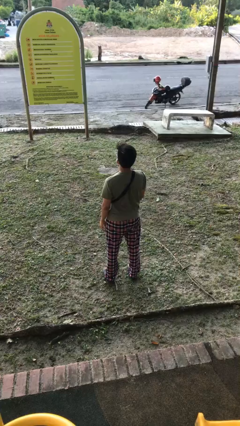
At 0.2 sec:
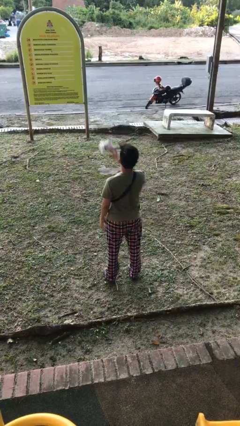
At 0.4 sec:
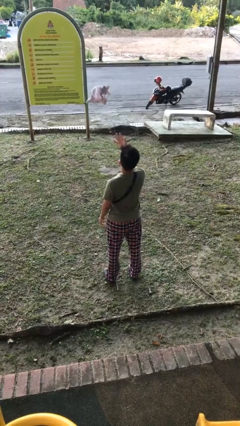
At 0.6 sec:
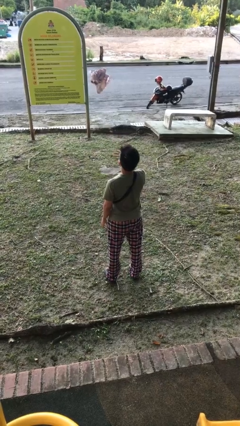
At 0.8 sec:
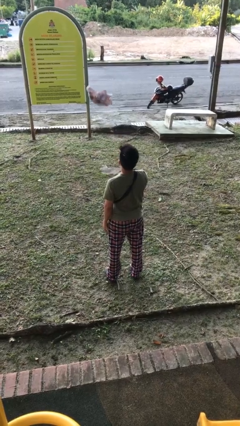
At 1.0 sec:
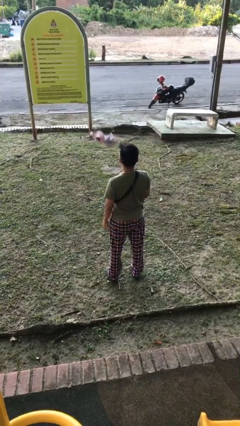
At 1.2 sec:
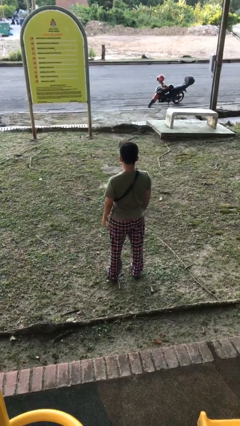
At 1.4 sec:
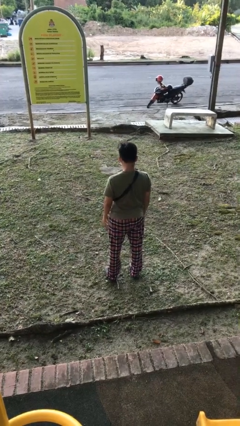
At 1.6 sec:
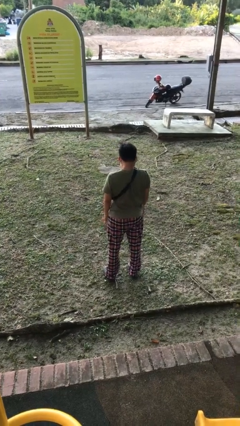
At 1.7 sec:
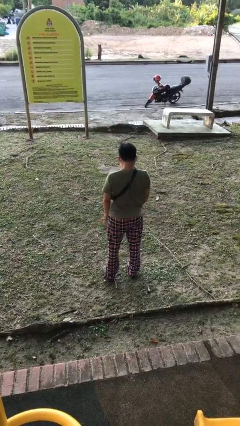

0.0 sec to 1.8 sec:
person throws object into air

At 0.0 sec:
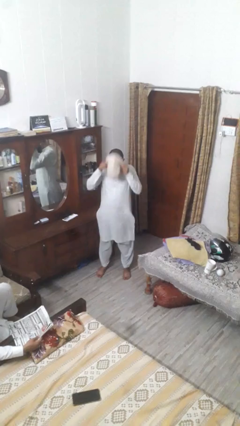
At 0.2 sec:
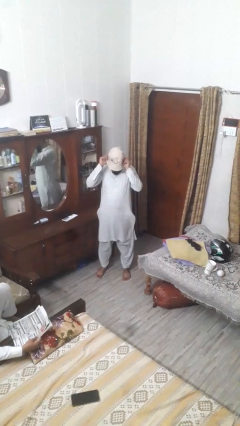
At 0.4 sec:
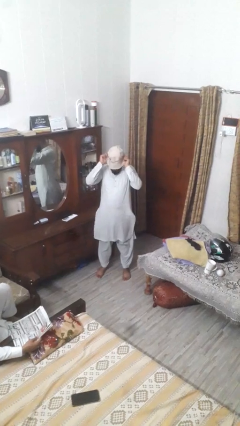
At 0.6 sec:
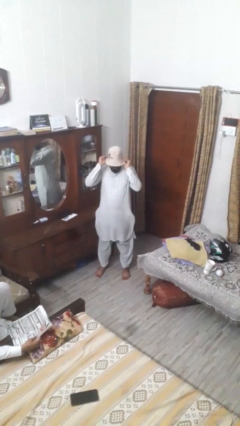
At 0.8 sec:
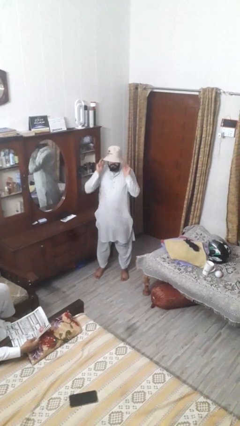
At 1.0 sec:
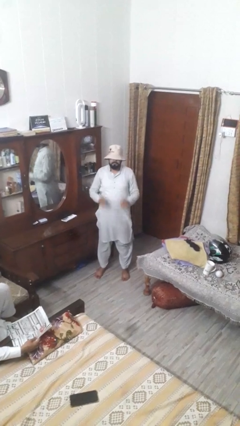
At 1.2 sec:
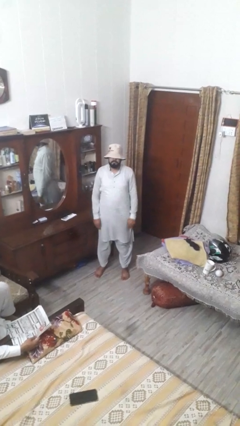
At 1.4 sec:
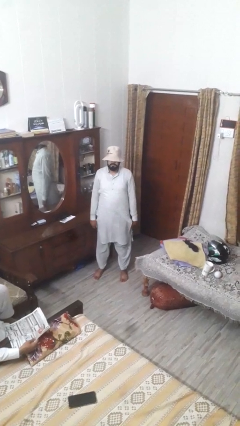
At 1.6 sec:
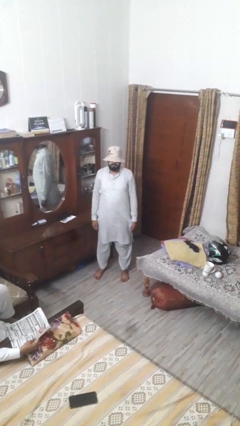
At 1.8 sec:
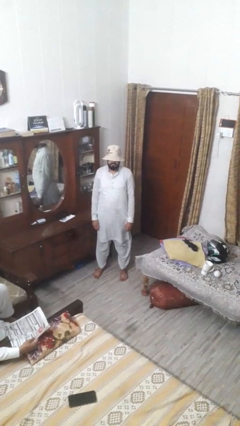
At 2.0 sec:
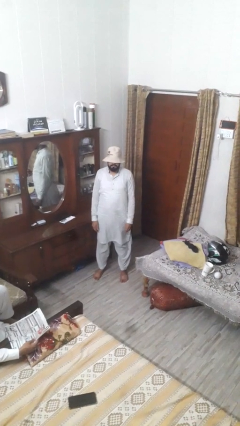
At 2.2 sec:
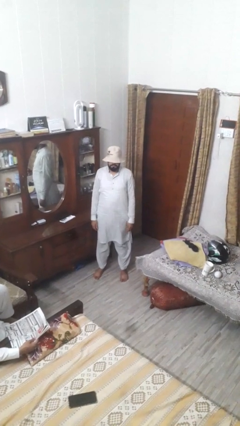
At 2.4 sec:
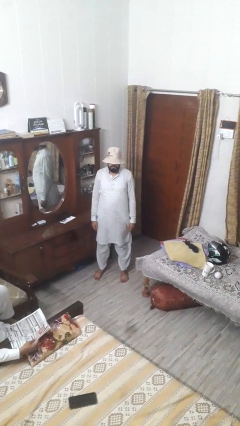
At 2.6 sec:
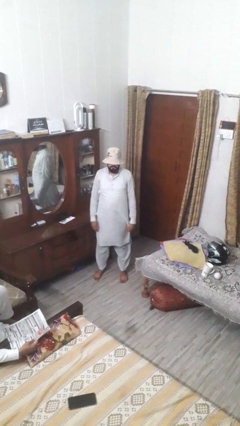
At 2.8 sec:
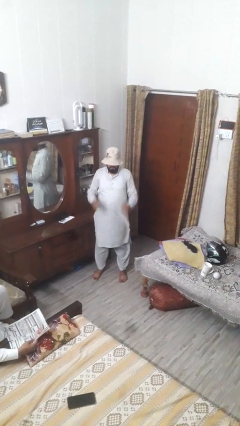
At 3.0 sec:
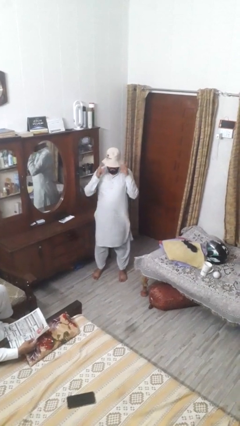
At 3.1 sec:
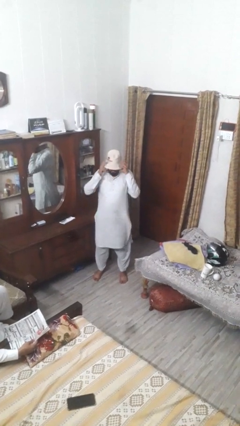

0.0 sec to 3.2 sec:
person puts on hat

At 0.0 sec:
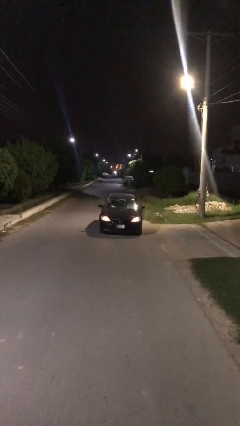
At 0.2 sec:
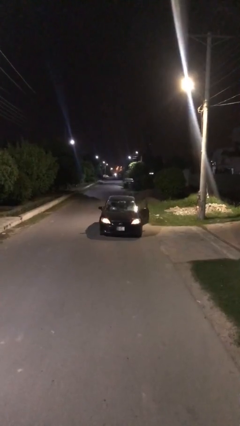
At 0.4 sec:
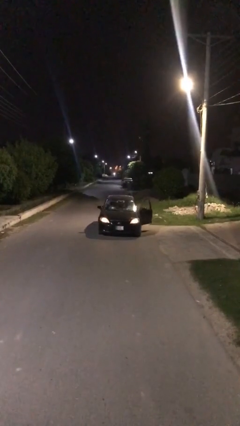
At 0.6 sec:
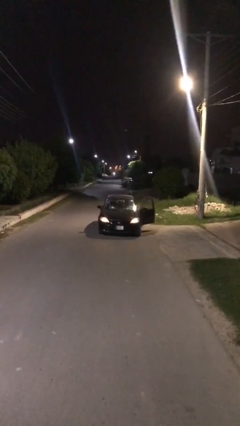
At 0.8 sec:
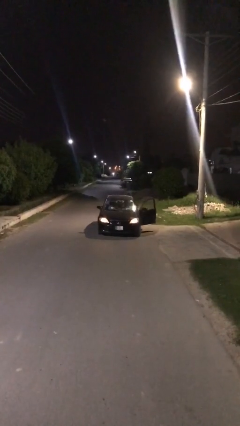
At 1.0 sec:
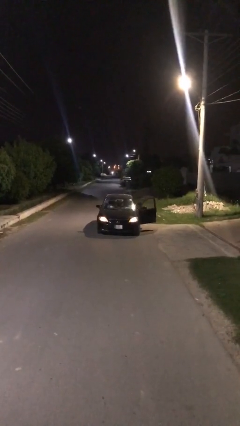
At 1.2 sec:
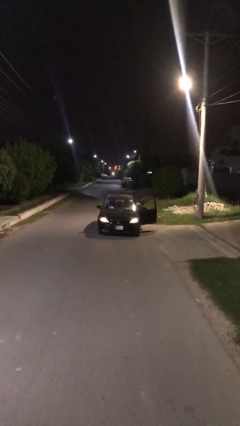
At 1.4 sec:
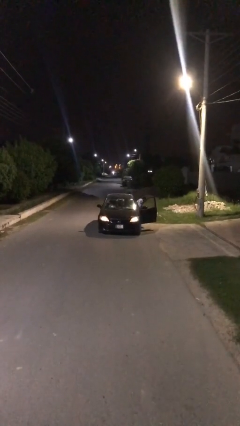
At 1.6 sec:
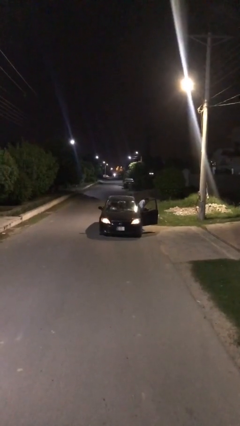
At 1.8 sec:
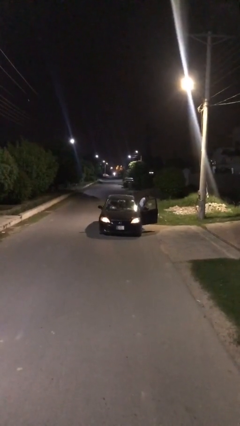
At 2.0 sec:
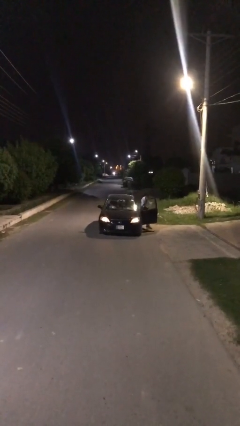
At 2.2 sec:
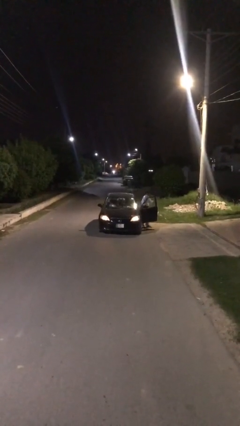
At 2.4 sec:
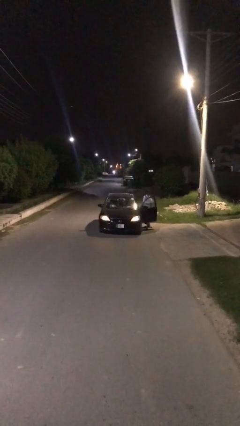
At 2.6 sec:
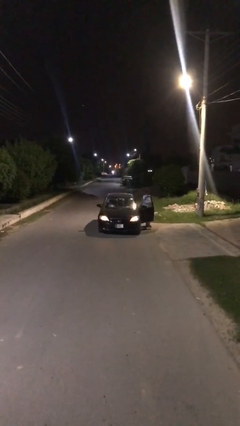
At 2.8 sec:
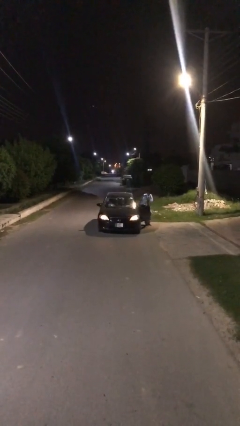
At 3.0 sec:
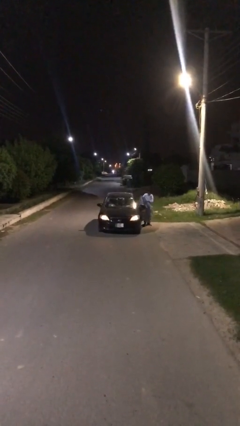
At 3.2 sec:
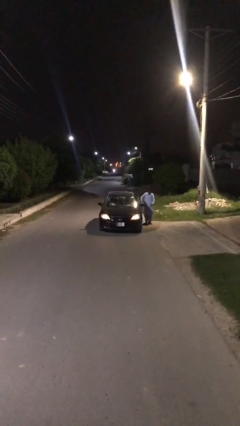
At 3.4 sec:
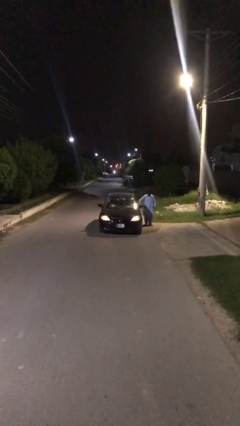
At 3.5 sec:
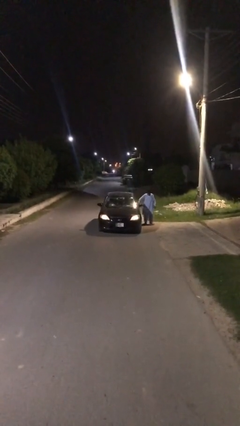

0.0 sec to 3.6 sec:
car drops off person

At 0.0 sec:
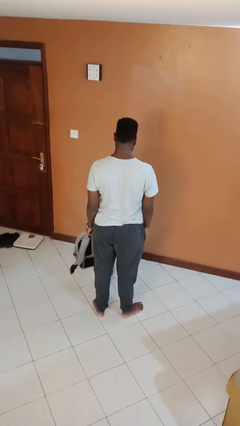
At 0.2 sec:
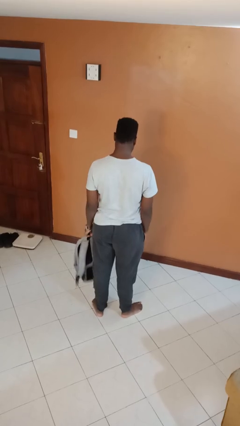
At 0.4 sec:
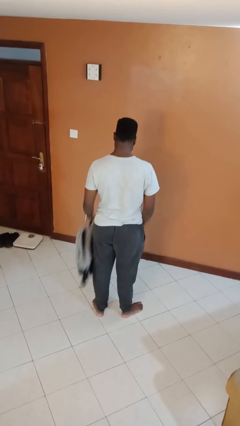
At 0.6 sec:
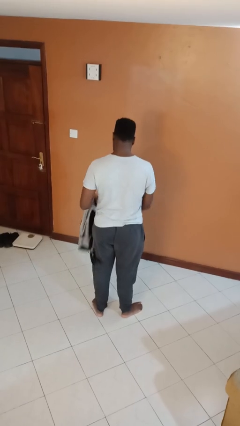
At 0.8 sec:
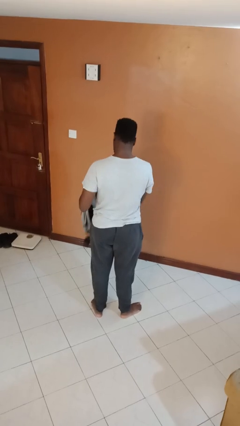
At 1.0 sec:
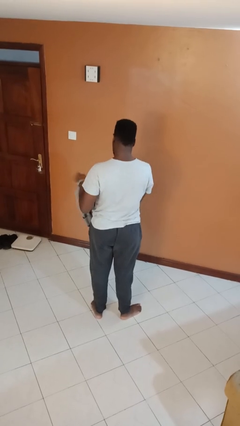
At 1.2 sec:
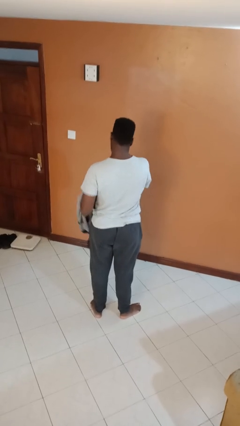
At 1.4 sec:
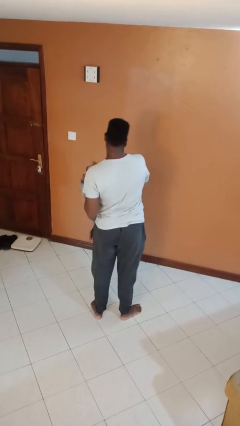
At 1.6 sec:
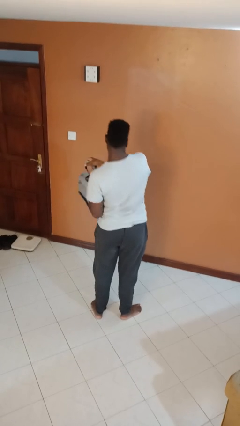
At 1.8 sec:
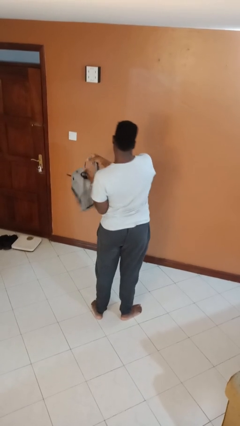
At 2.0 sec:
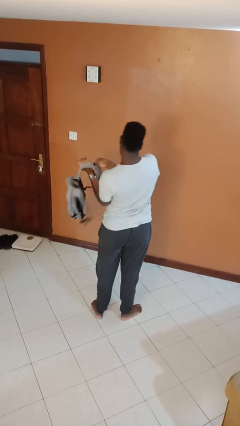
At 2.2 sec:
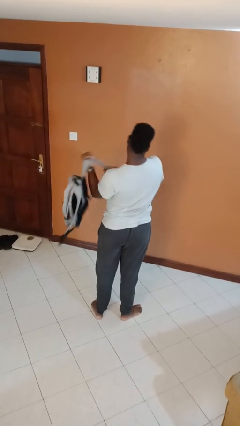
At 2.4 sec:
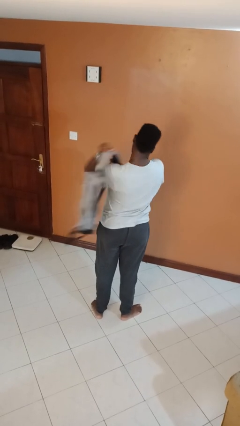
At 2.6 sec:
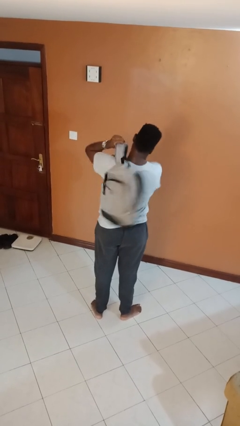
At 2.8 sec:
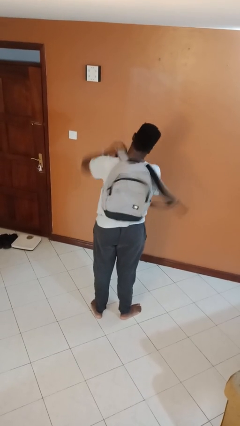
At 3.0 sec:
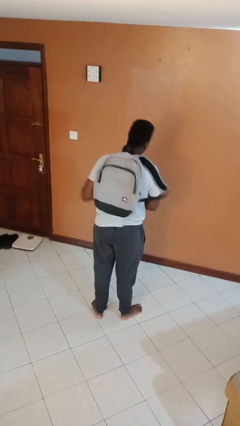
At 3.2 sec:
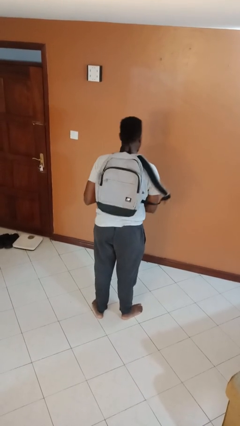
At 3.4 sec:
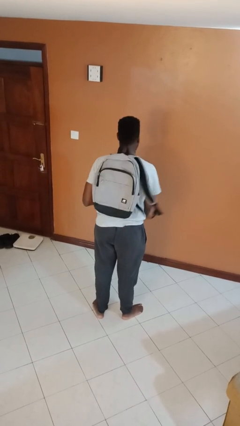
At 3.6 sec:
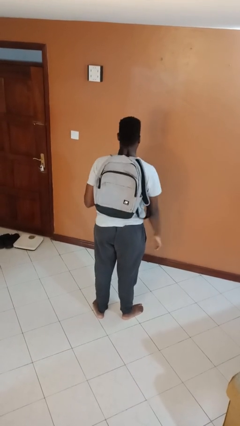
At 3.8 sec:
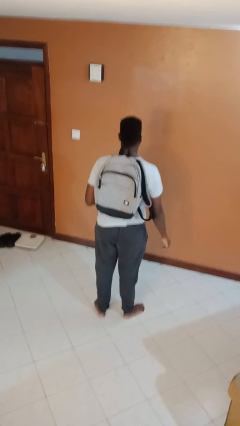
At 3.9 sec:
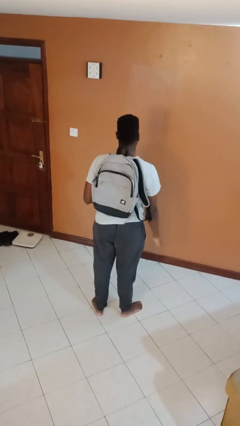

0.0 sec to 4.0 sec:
person puts on backpack

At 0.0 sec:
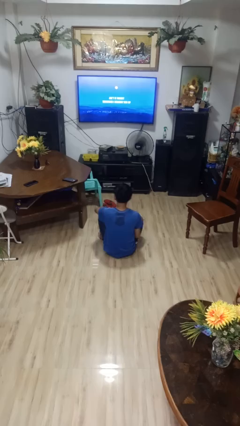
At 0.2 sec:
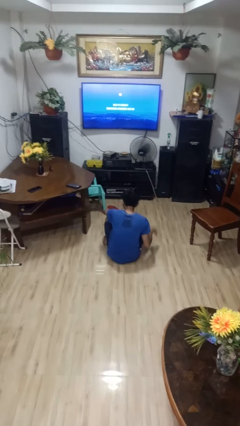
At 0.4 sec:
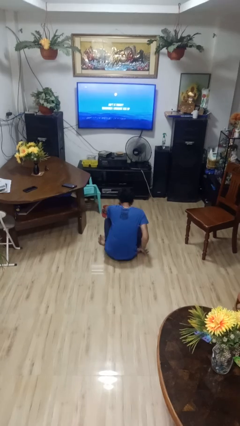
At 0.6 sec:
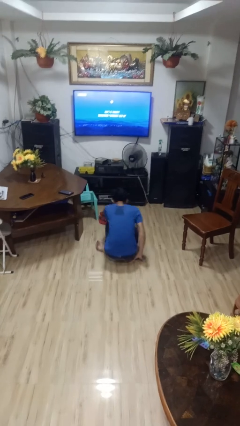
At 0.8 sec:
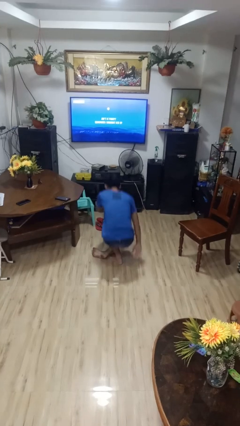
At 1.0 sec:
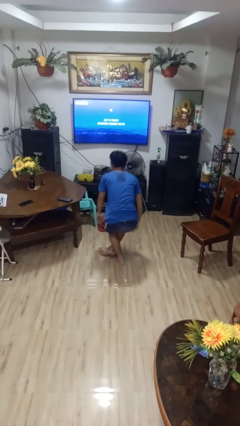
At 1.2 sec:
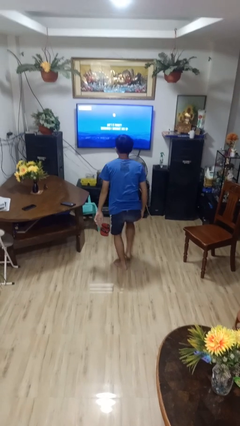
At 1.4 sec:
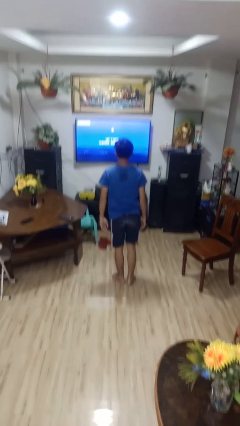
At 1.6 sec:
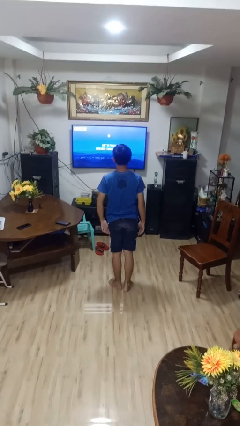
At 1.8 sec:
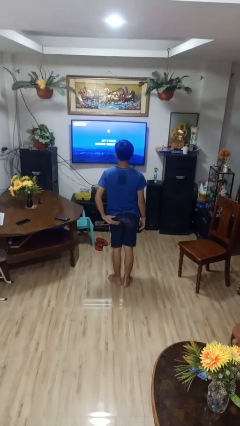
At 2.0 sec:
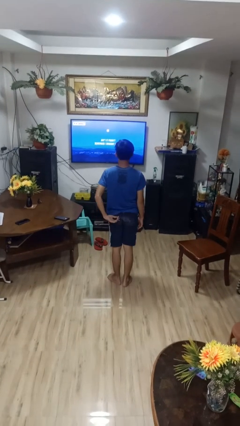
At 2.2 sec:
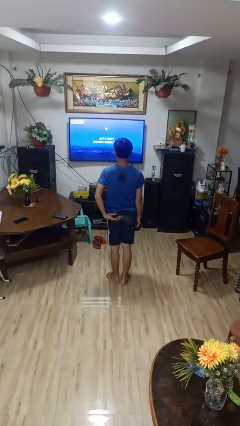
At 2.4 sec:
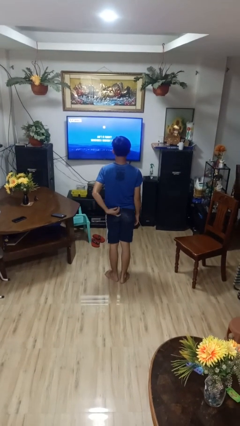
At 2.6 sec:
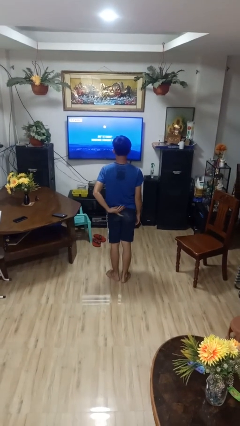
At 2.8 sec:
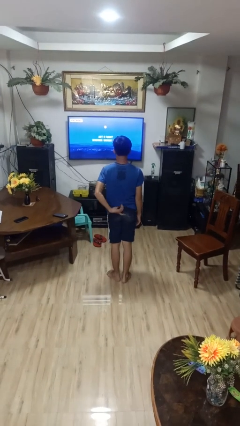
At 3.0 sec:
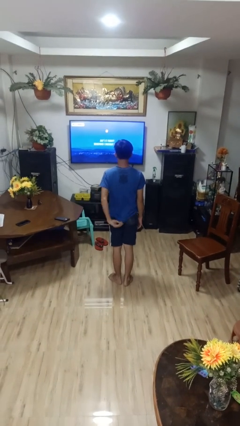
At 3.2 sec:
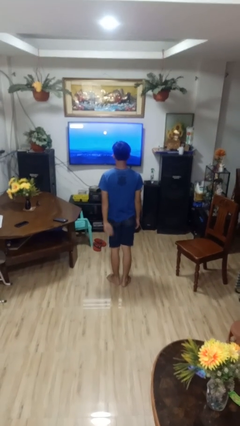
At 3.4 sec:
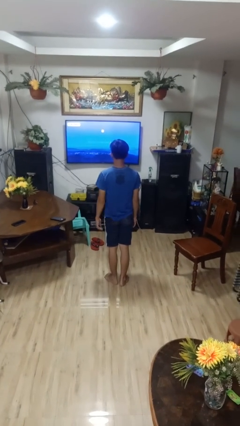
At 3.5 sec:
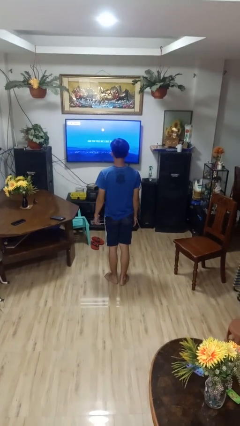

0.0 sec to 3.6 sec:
person stands up from floor

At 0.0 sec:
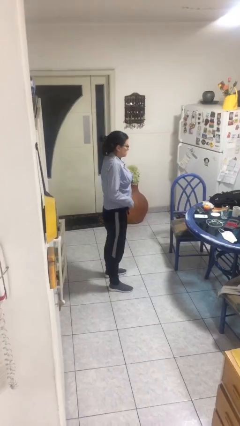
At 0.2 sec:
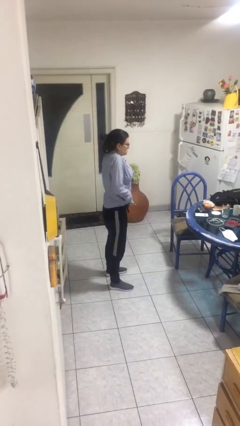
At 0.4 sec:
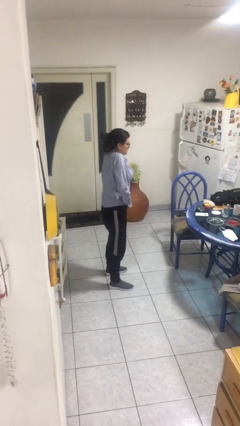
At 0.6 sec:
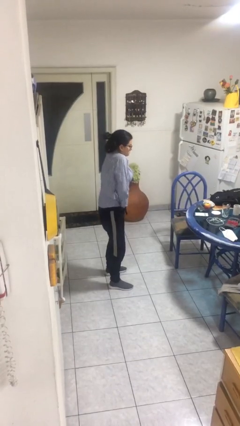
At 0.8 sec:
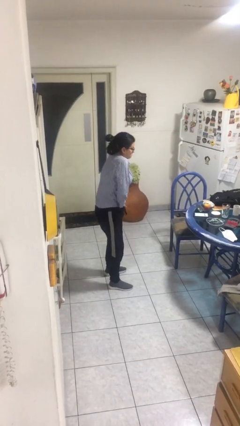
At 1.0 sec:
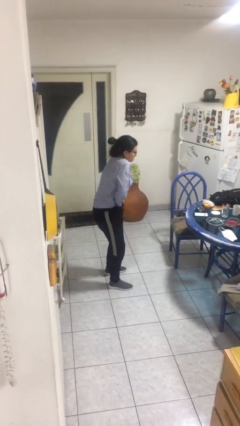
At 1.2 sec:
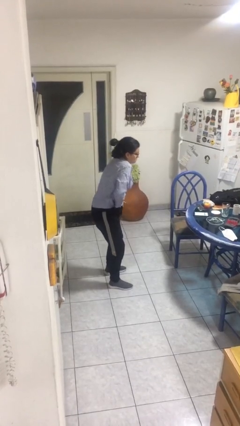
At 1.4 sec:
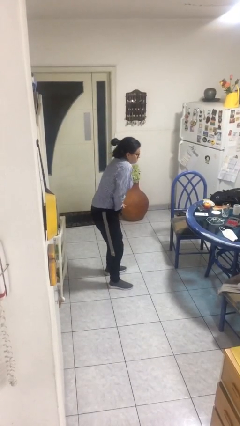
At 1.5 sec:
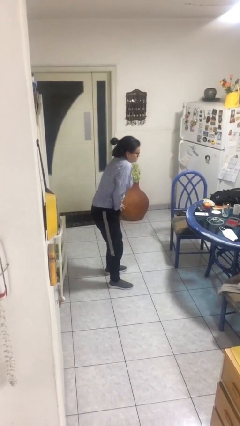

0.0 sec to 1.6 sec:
person tucks in shirt
